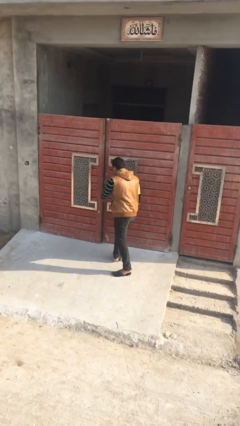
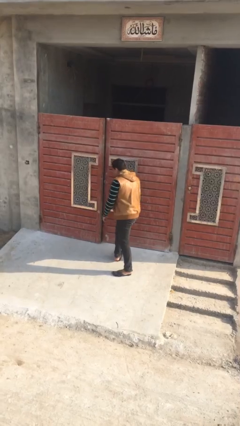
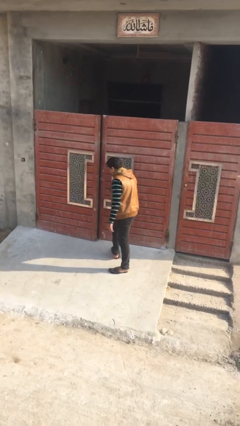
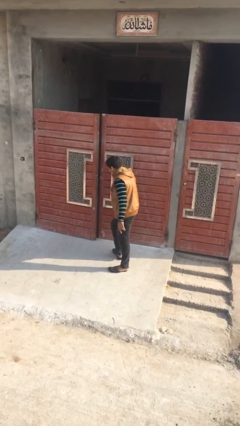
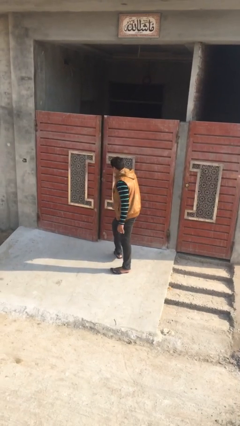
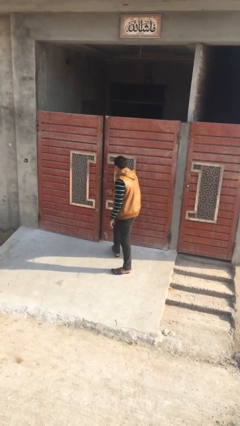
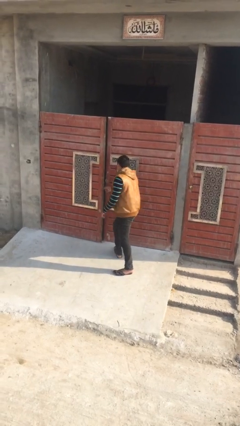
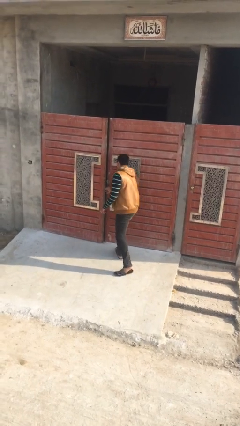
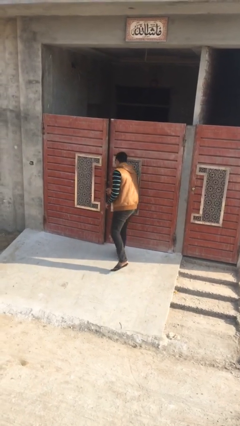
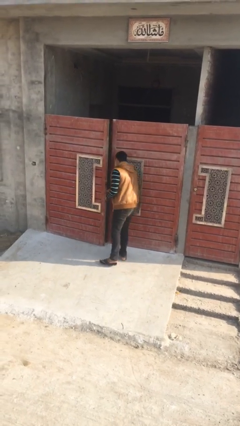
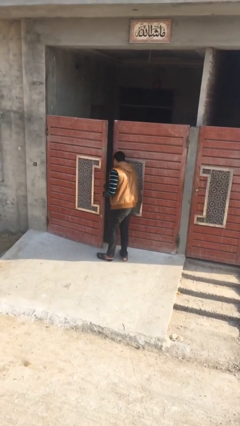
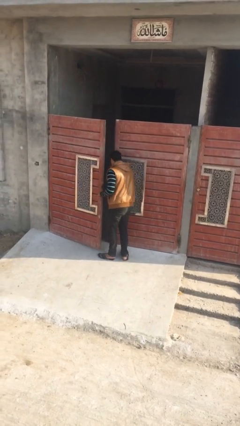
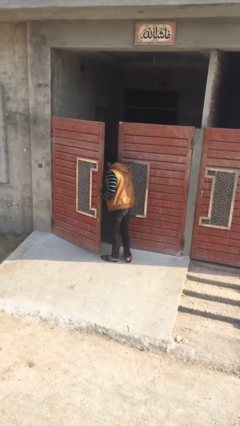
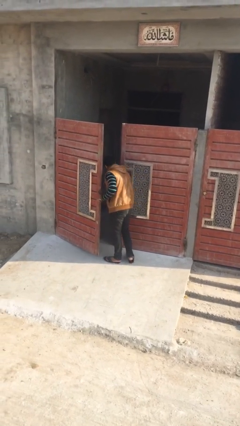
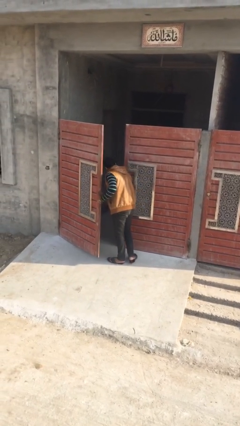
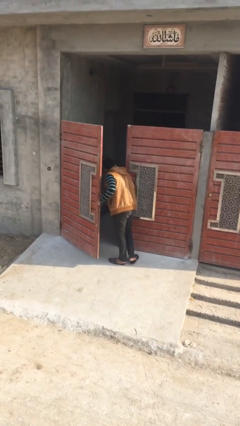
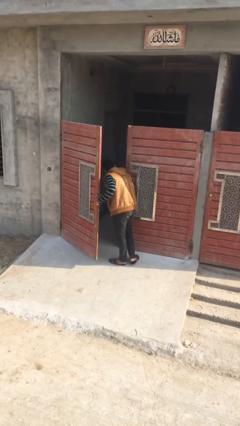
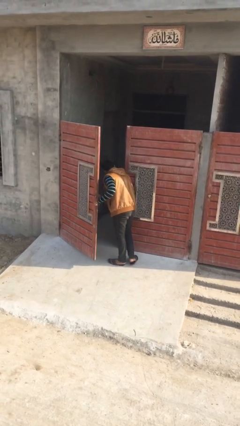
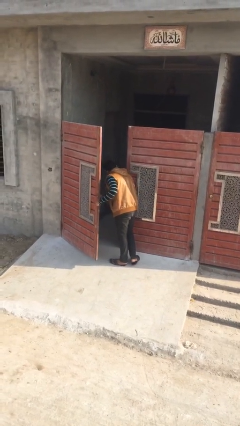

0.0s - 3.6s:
person opens facility door

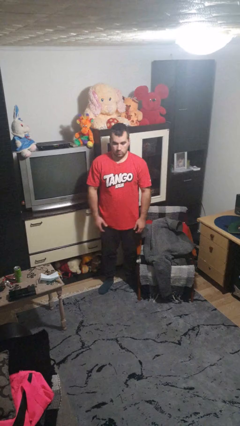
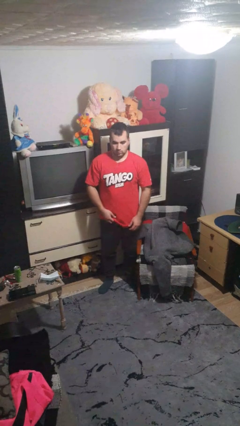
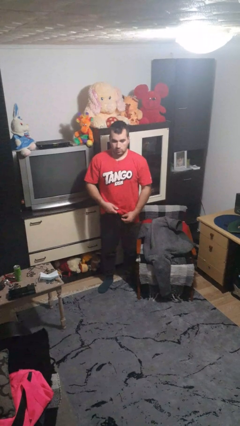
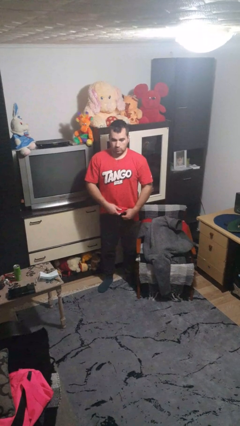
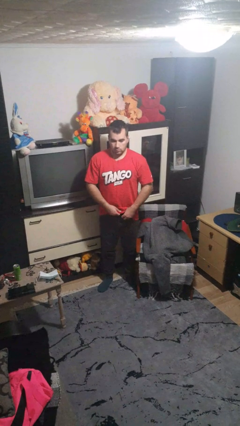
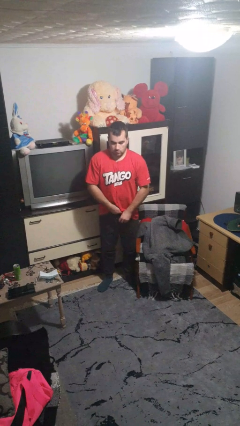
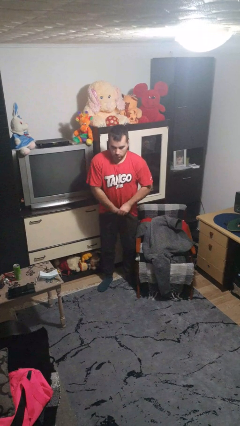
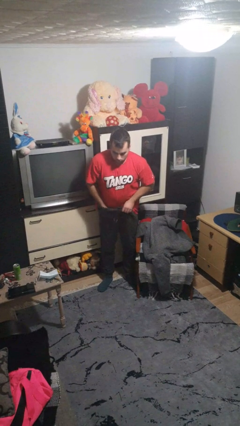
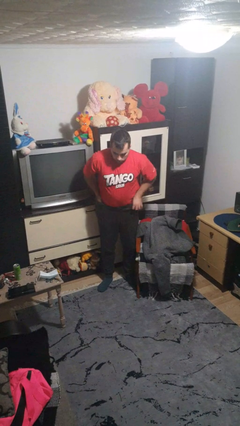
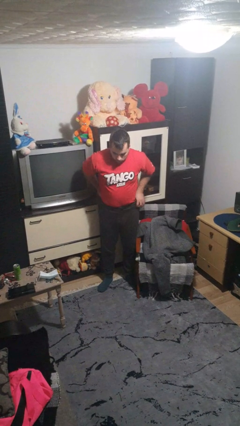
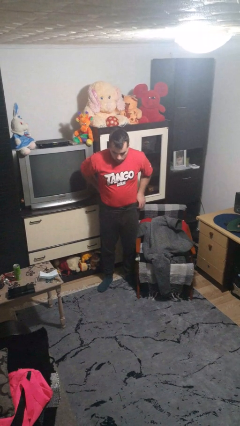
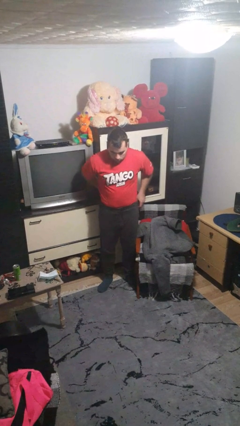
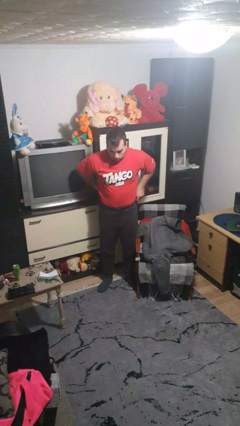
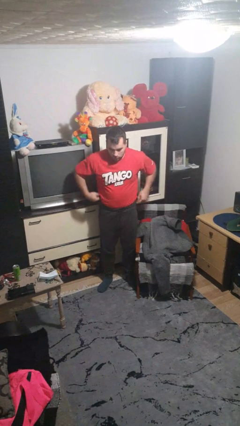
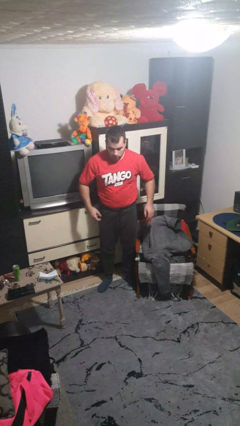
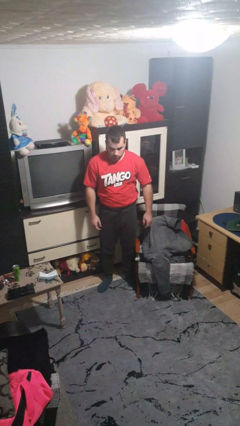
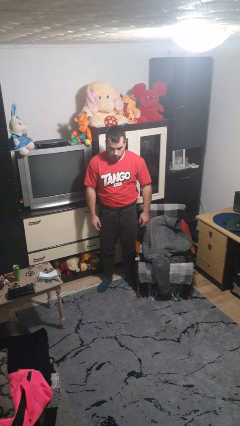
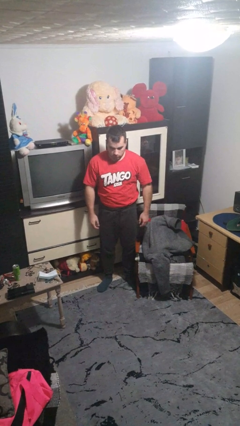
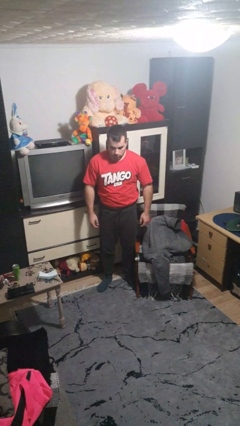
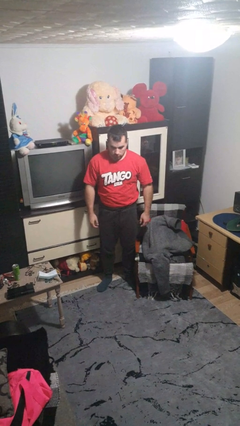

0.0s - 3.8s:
person tucks in shirt

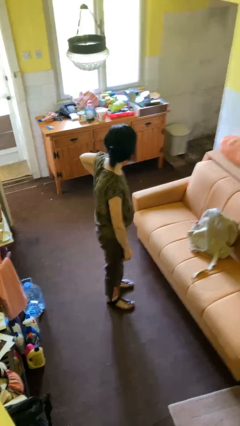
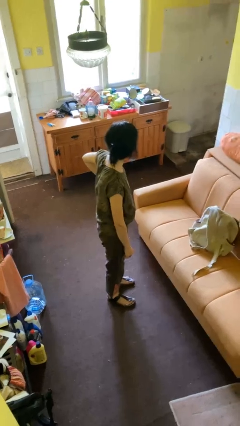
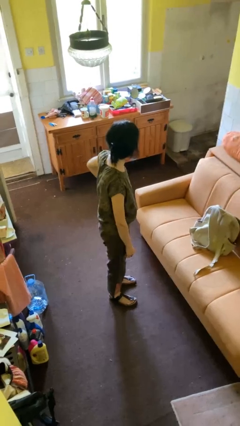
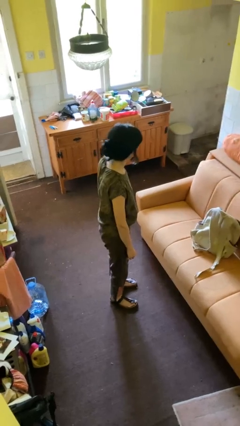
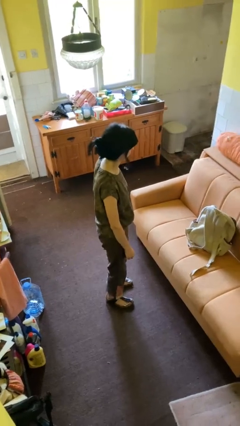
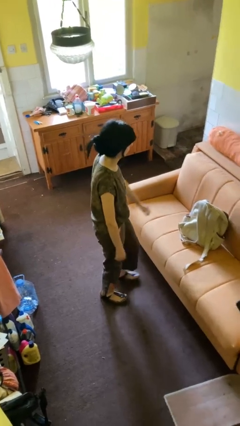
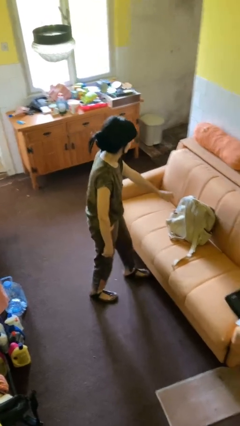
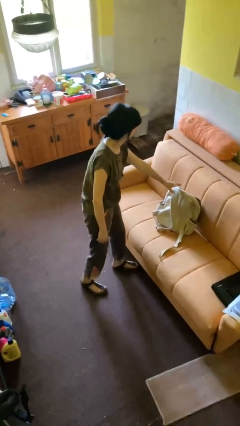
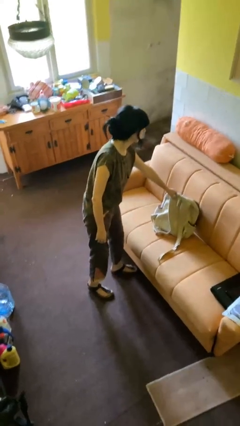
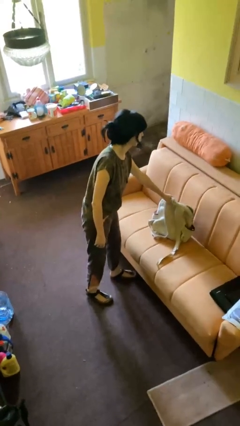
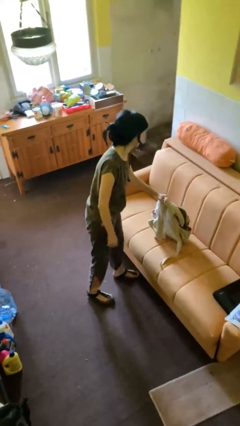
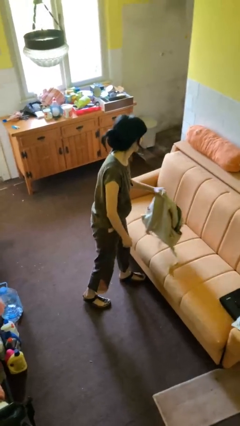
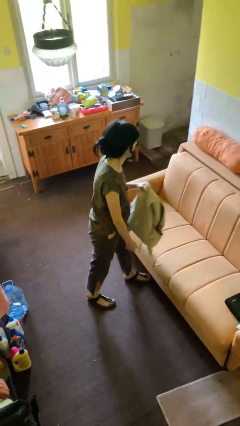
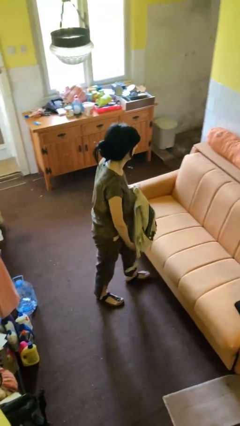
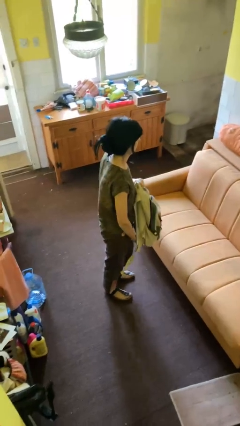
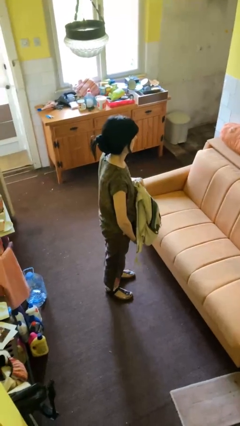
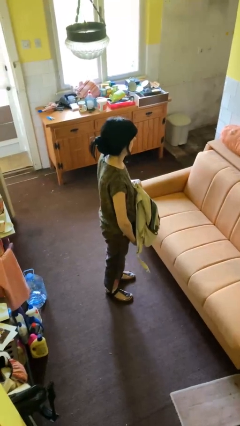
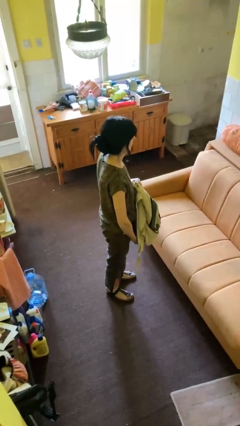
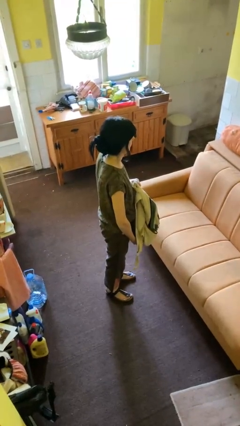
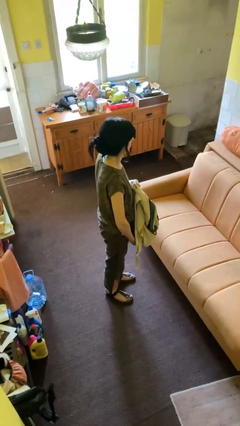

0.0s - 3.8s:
person picks up object from couch

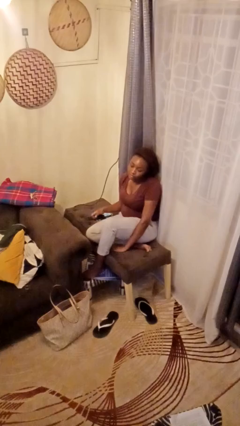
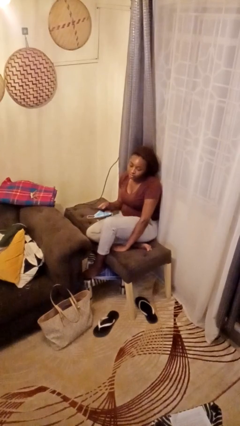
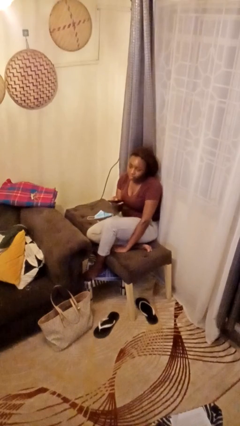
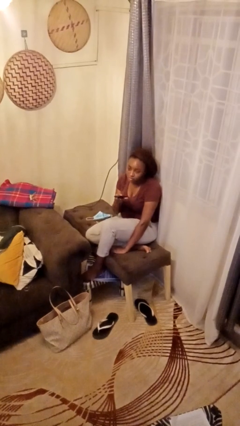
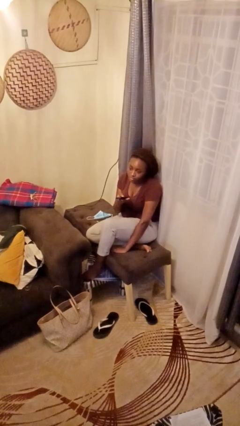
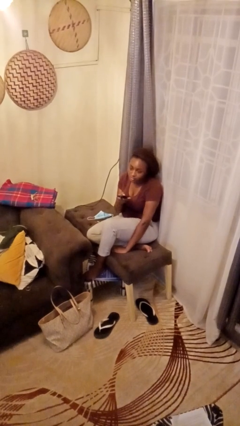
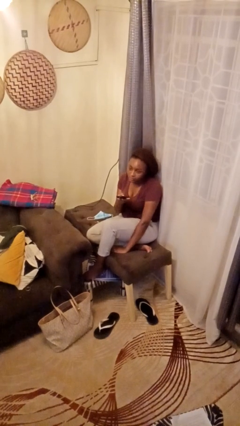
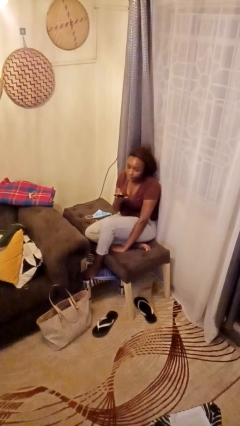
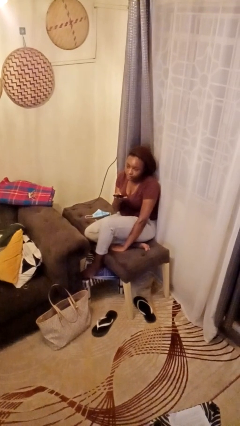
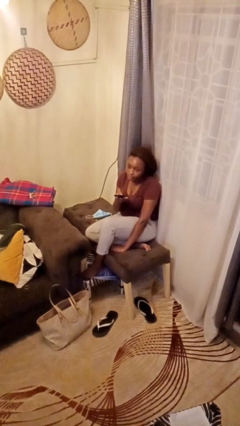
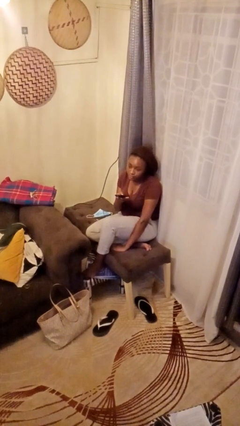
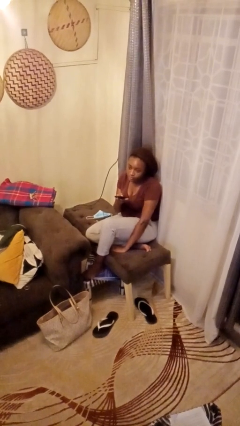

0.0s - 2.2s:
person uses television remote

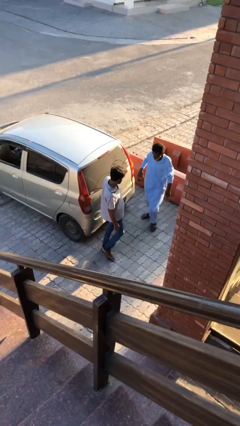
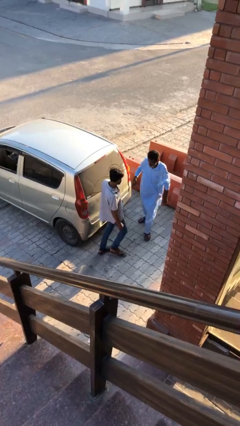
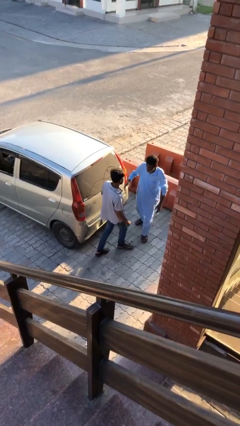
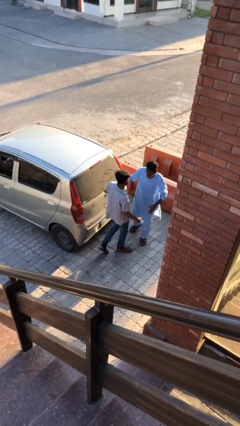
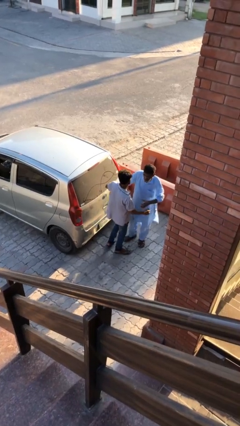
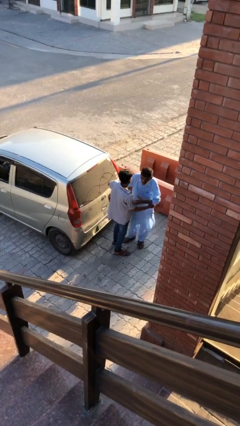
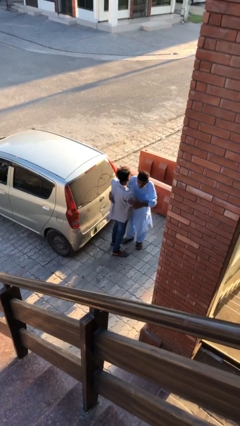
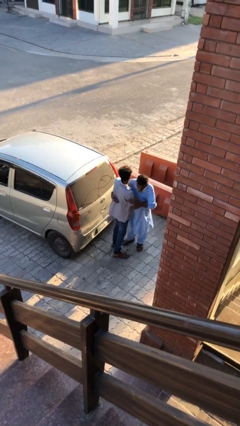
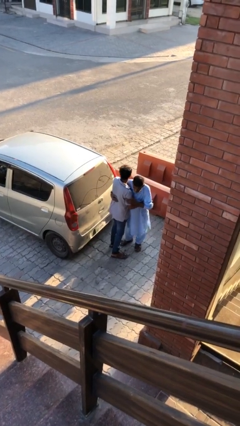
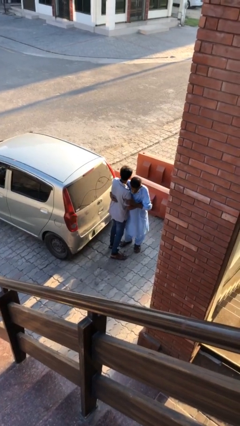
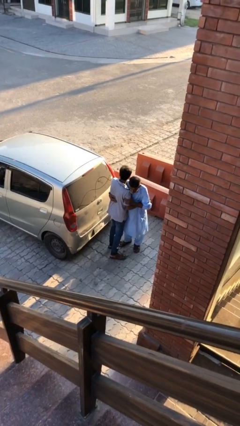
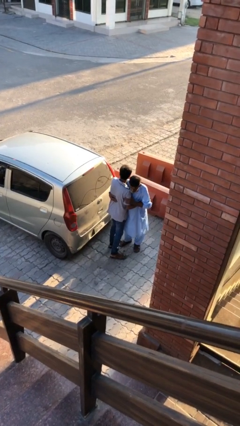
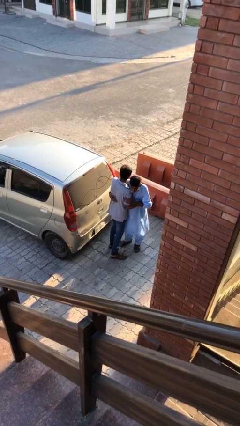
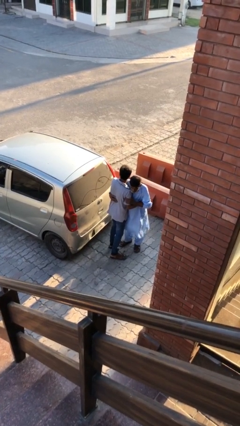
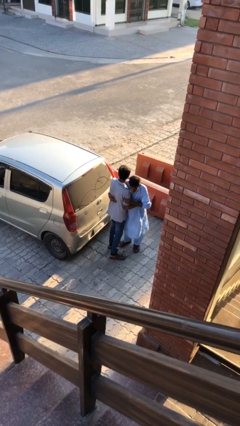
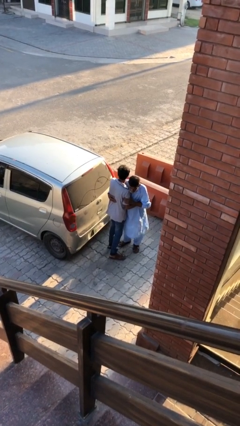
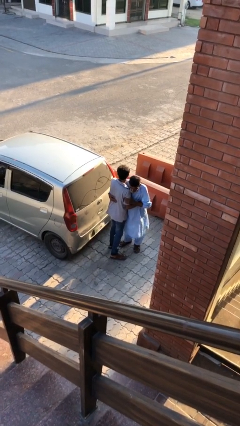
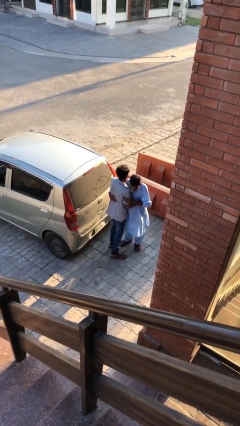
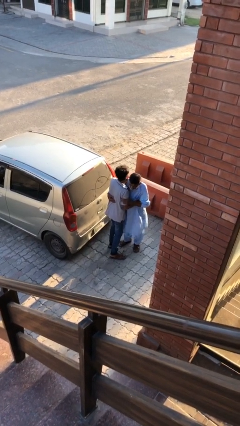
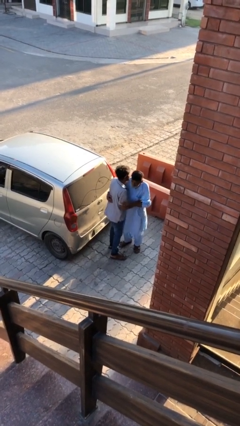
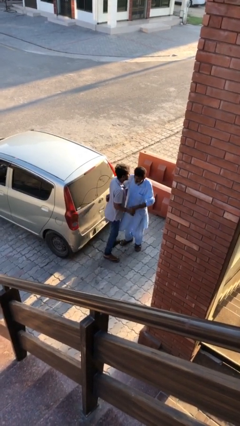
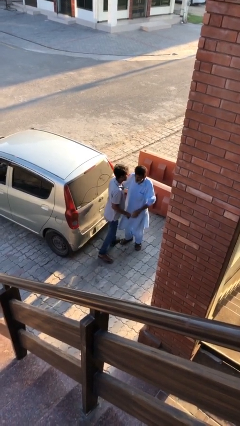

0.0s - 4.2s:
person embraces person
